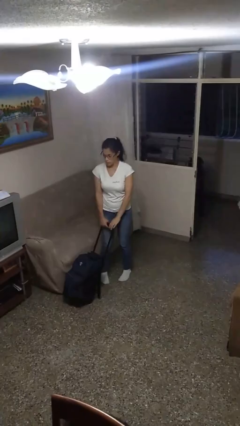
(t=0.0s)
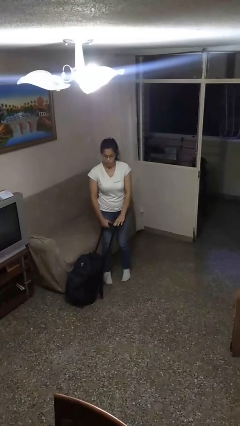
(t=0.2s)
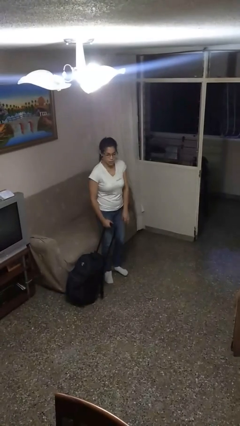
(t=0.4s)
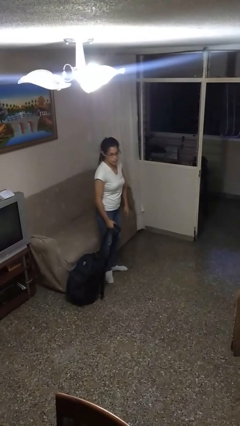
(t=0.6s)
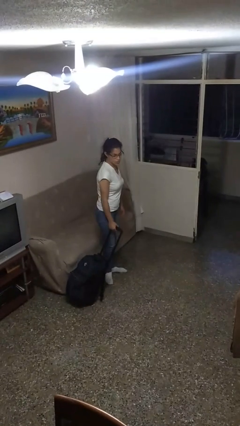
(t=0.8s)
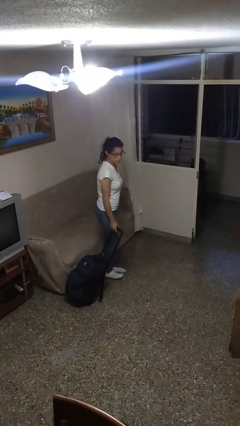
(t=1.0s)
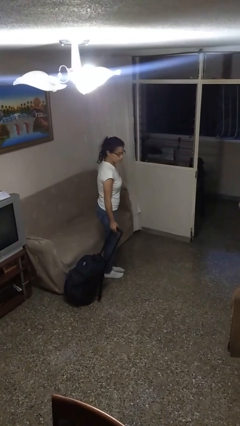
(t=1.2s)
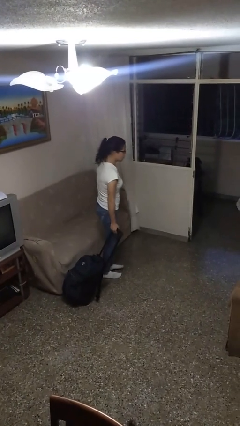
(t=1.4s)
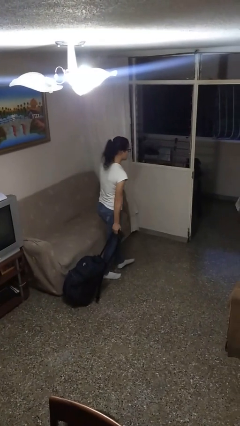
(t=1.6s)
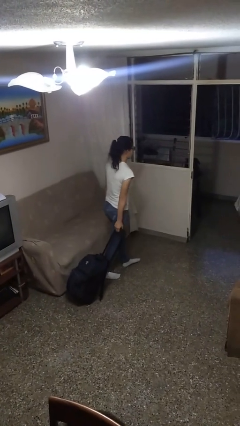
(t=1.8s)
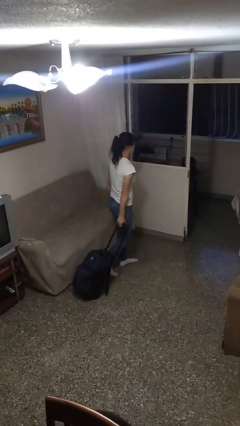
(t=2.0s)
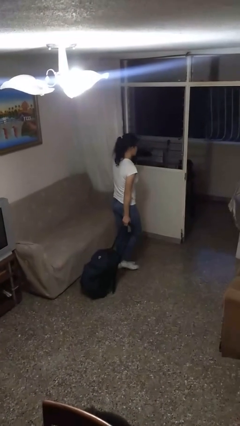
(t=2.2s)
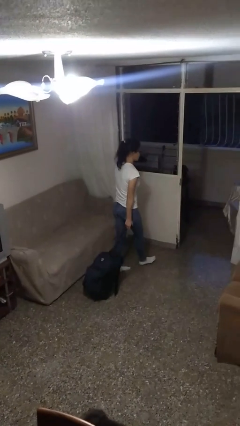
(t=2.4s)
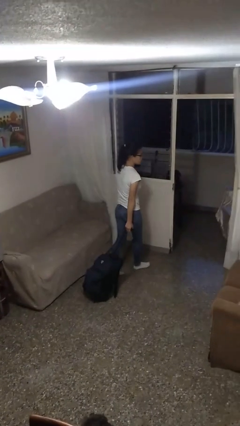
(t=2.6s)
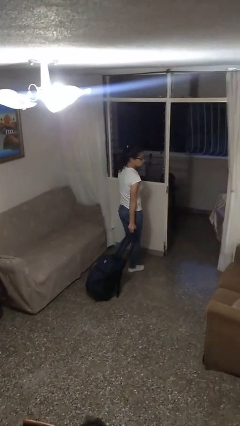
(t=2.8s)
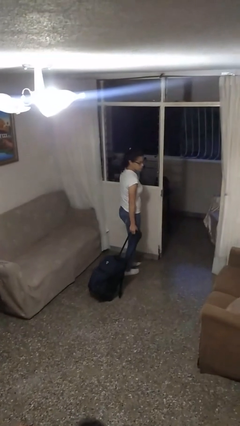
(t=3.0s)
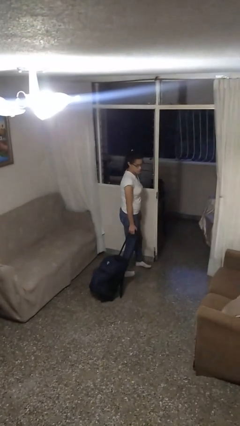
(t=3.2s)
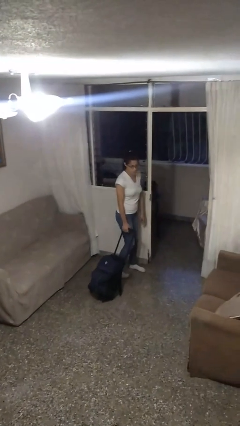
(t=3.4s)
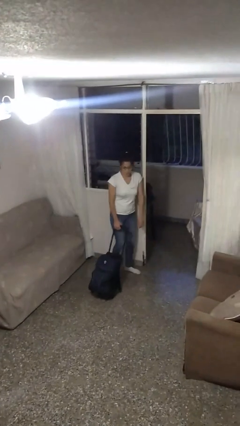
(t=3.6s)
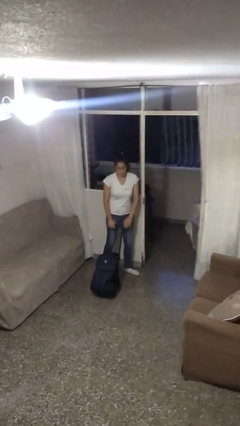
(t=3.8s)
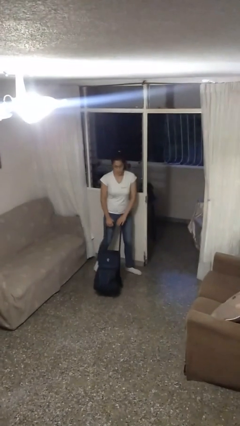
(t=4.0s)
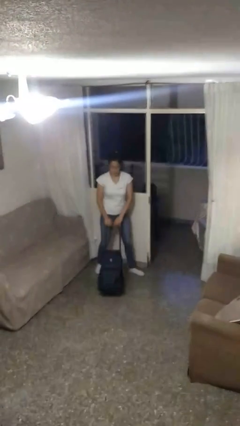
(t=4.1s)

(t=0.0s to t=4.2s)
person pulls wheeled cart

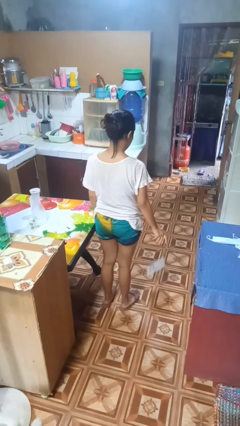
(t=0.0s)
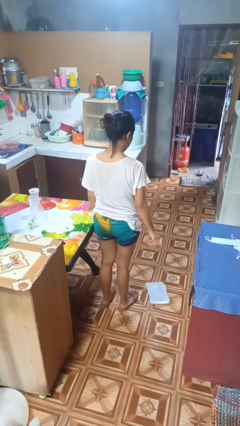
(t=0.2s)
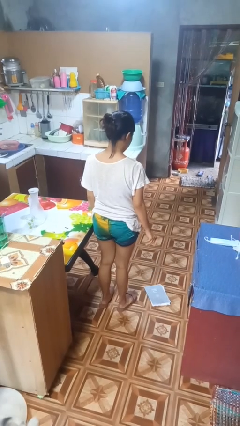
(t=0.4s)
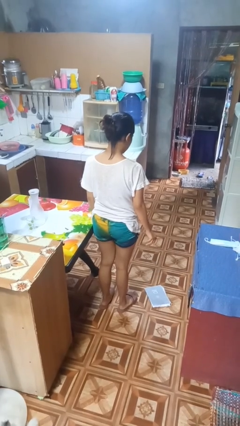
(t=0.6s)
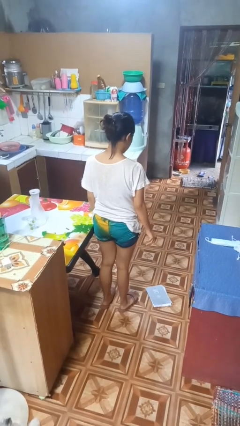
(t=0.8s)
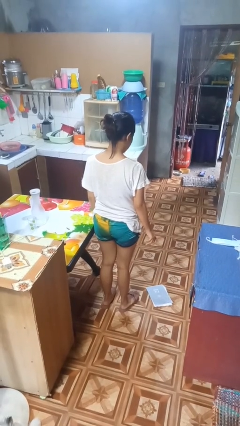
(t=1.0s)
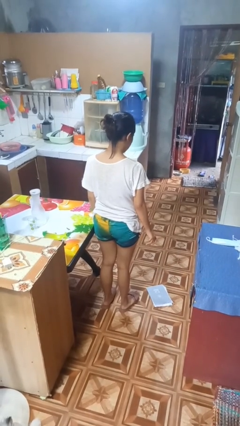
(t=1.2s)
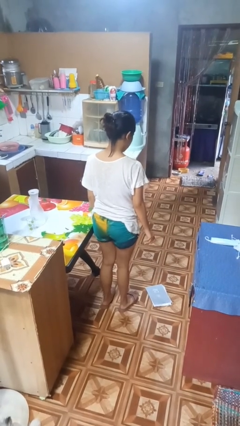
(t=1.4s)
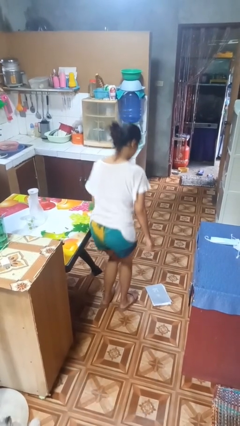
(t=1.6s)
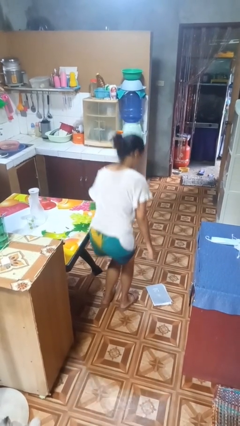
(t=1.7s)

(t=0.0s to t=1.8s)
person drops object

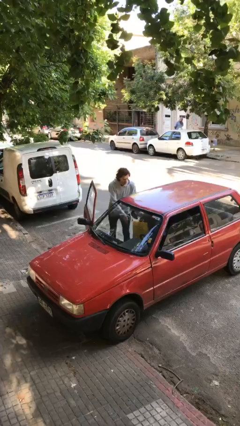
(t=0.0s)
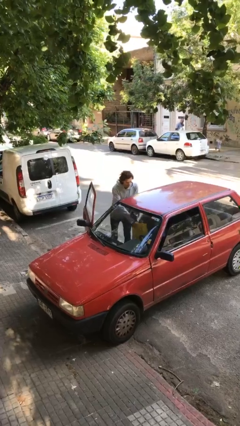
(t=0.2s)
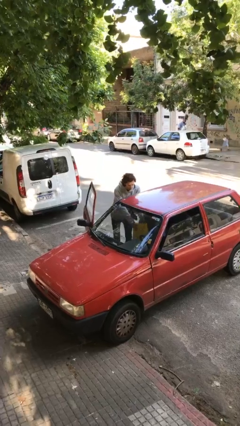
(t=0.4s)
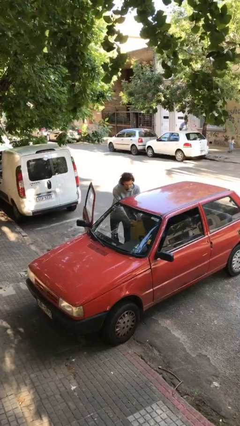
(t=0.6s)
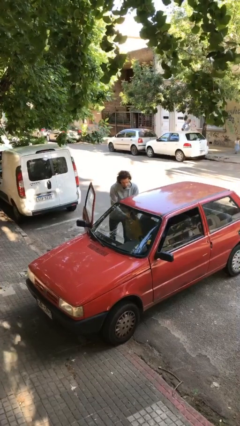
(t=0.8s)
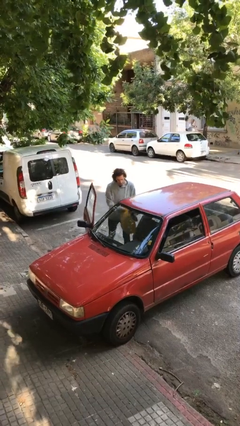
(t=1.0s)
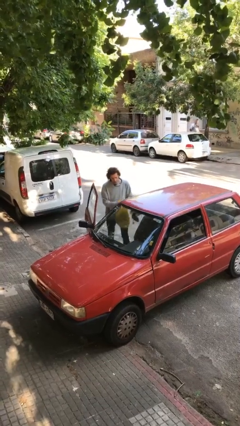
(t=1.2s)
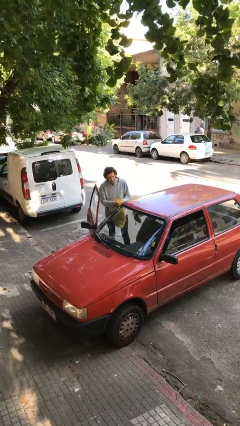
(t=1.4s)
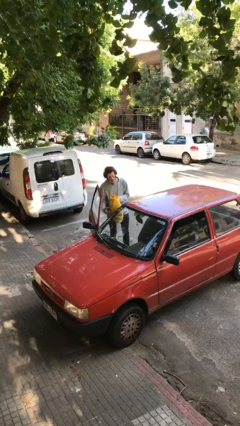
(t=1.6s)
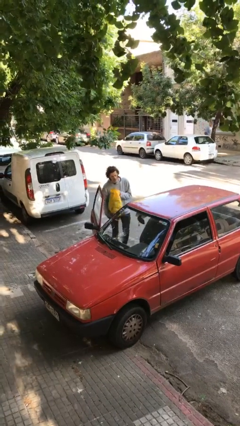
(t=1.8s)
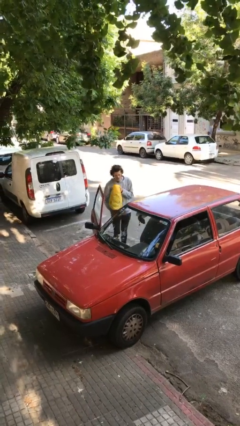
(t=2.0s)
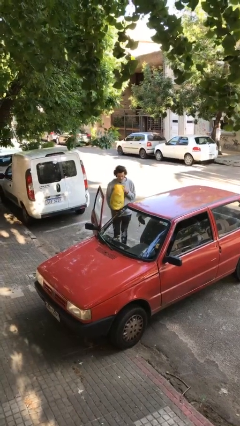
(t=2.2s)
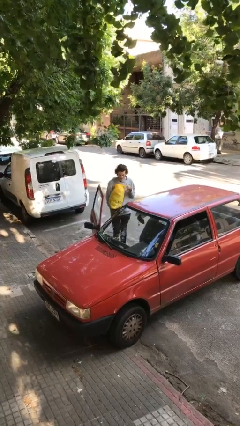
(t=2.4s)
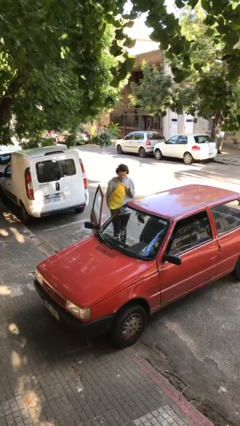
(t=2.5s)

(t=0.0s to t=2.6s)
person unloads car

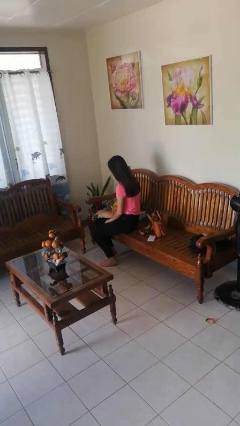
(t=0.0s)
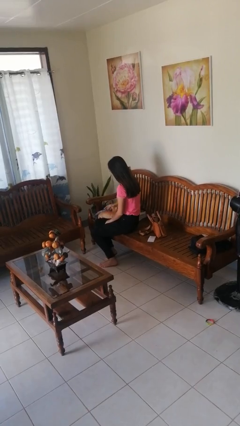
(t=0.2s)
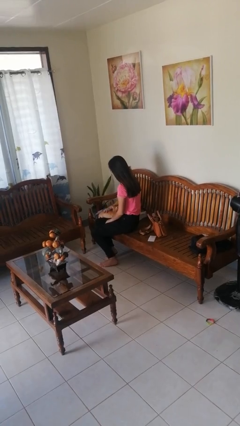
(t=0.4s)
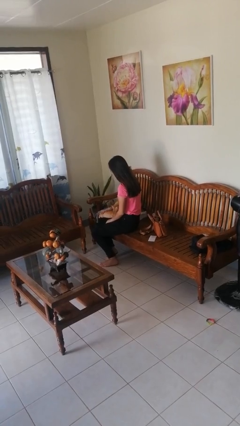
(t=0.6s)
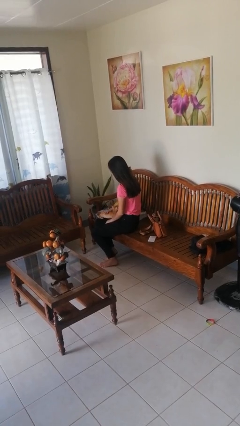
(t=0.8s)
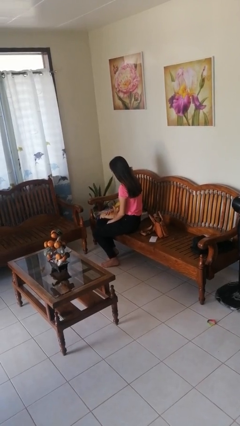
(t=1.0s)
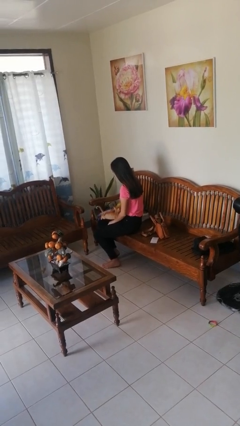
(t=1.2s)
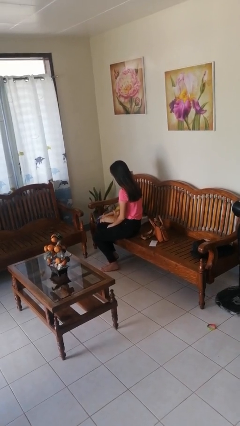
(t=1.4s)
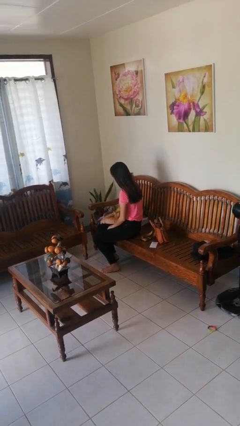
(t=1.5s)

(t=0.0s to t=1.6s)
person pets cat

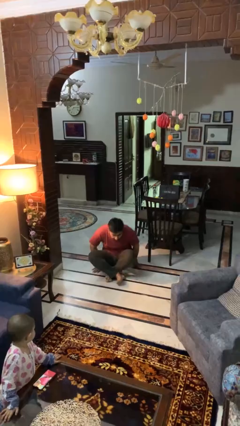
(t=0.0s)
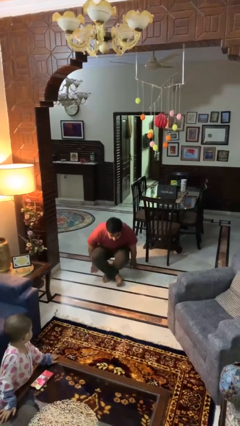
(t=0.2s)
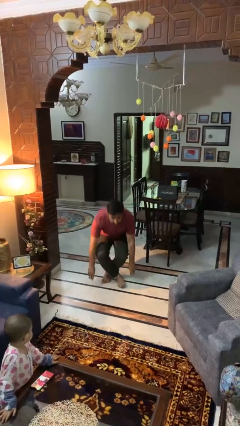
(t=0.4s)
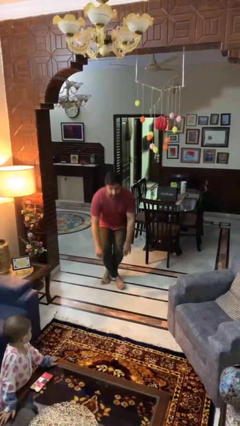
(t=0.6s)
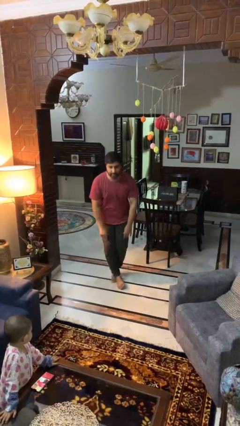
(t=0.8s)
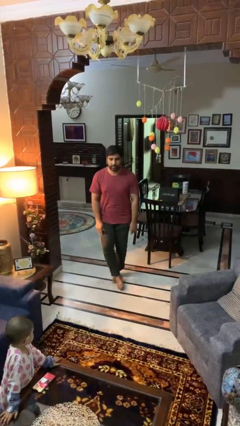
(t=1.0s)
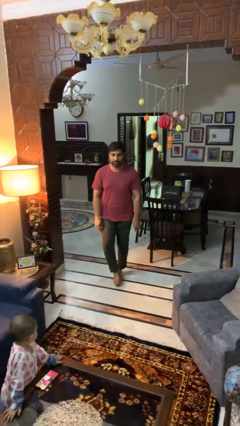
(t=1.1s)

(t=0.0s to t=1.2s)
person stands up from floor

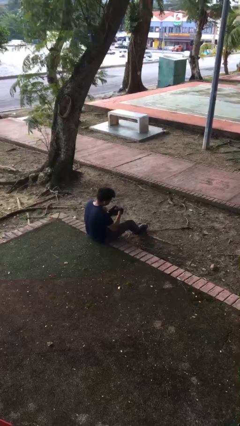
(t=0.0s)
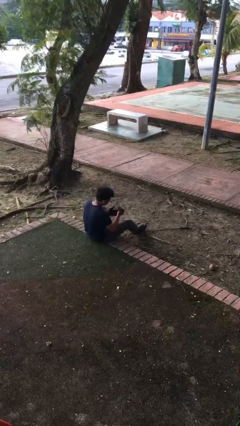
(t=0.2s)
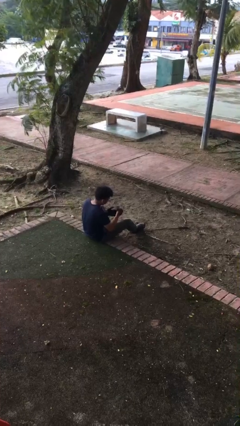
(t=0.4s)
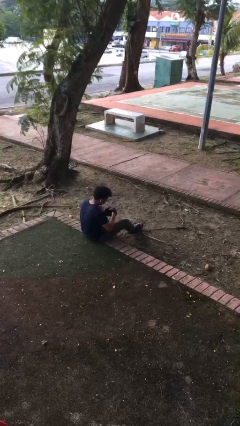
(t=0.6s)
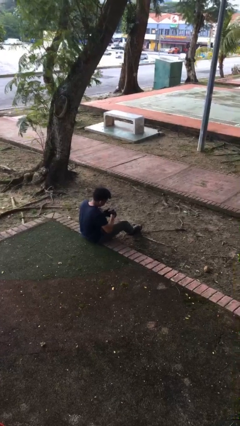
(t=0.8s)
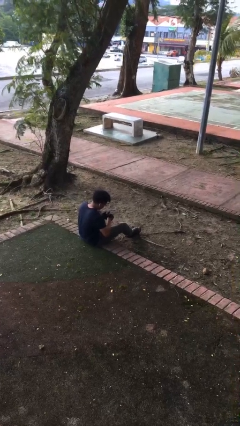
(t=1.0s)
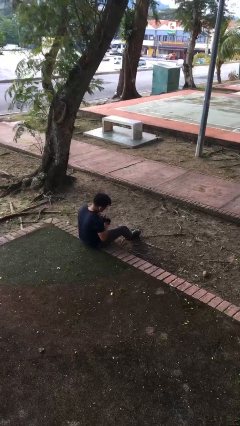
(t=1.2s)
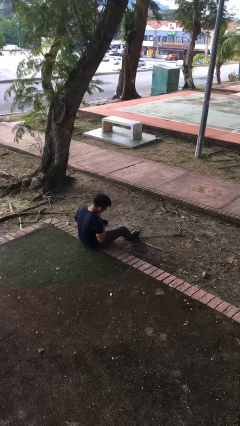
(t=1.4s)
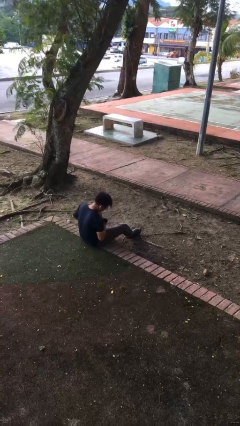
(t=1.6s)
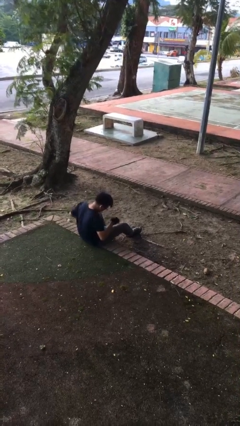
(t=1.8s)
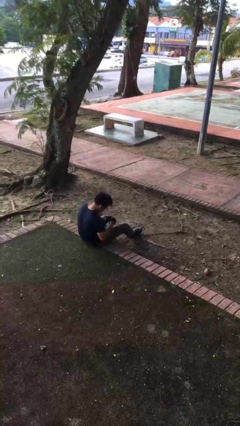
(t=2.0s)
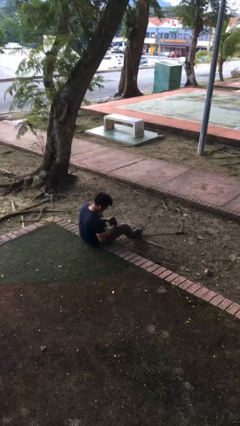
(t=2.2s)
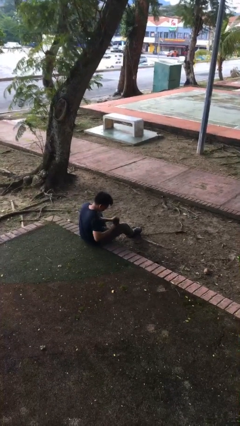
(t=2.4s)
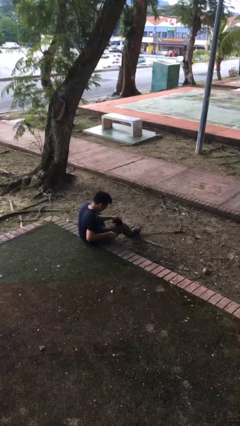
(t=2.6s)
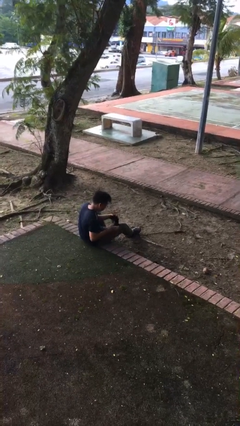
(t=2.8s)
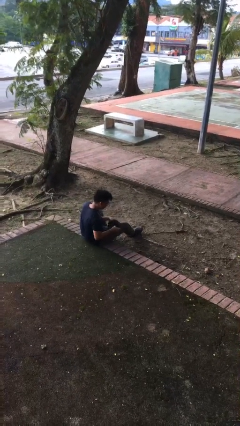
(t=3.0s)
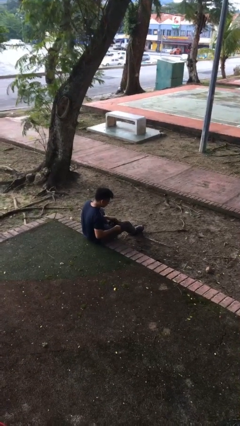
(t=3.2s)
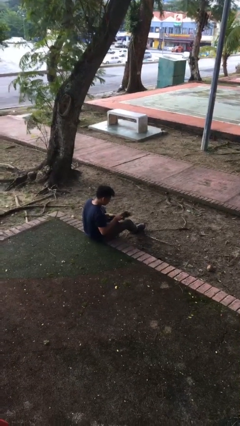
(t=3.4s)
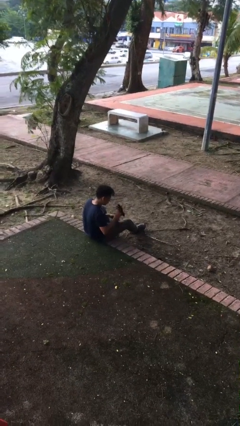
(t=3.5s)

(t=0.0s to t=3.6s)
person takes off gloves

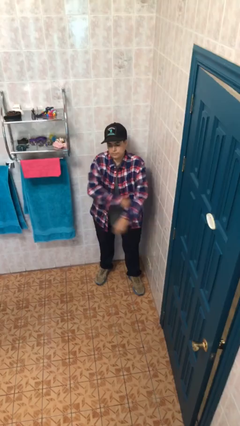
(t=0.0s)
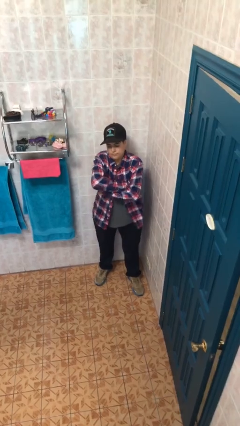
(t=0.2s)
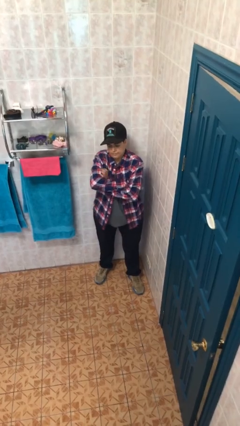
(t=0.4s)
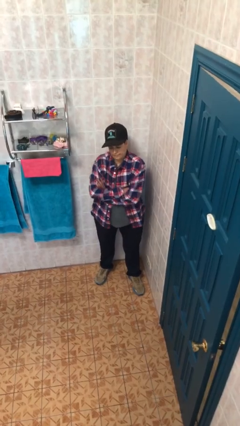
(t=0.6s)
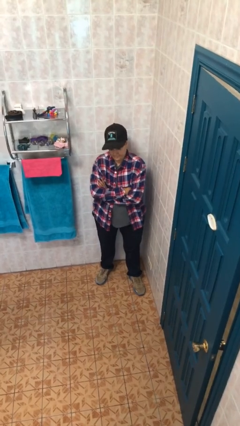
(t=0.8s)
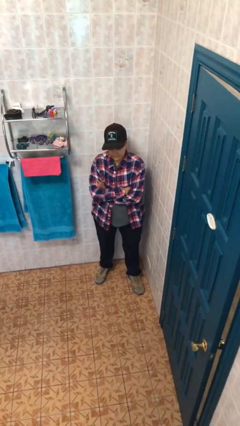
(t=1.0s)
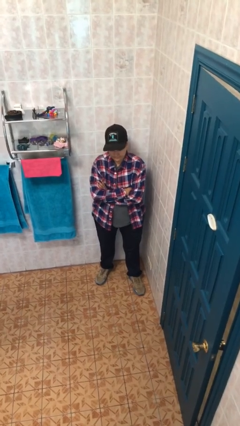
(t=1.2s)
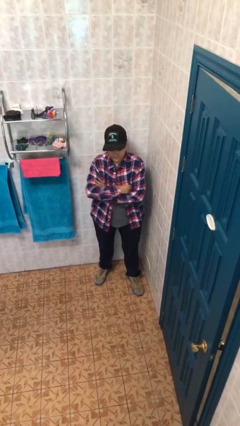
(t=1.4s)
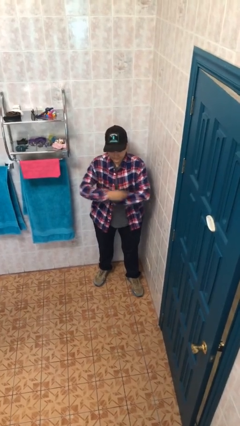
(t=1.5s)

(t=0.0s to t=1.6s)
person crosses arms

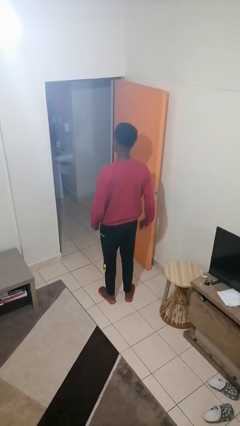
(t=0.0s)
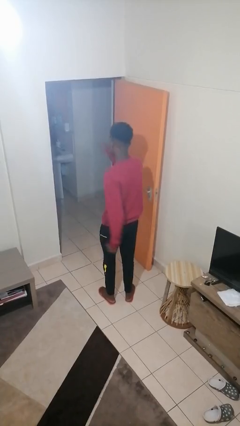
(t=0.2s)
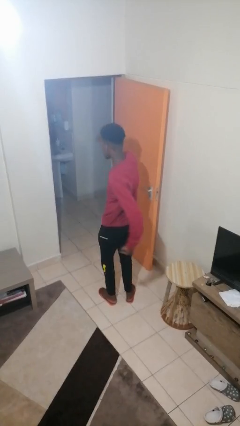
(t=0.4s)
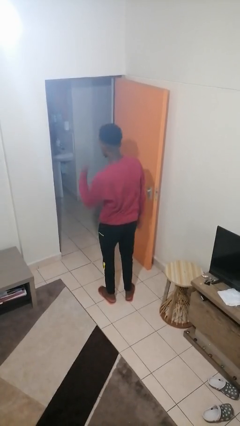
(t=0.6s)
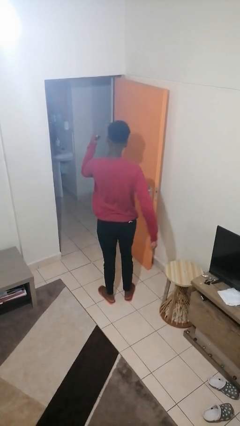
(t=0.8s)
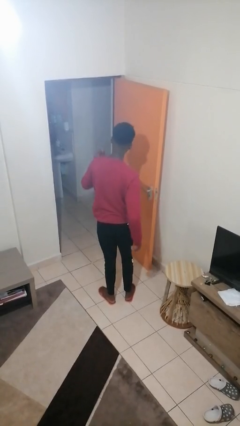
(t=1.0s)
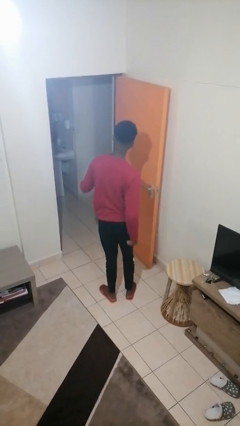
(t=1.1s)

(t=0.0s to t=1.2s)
person punches
